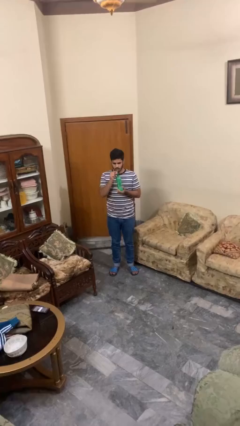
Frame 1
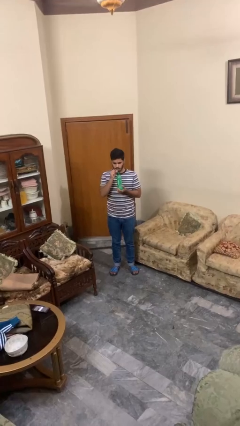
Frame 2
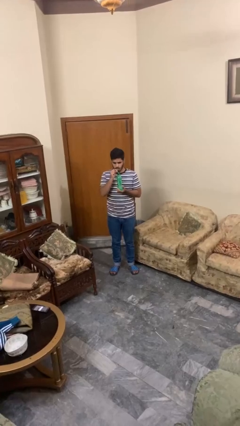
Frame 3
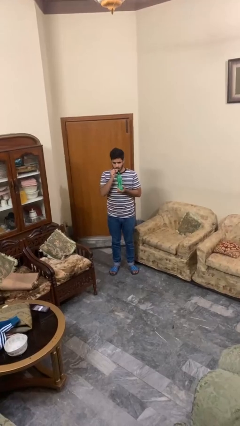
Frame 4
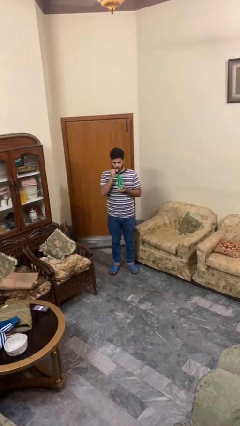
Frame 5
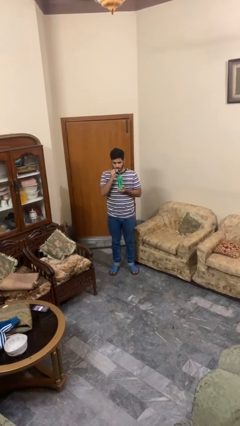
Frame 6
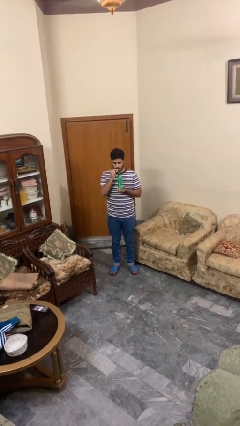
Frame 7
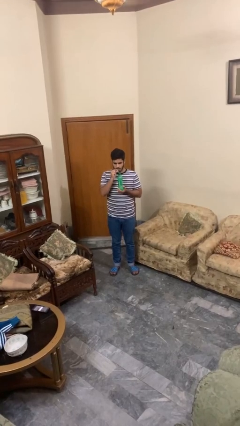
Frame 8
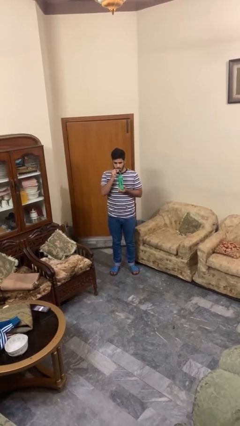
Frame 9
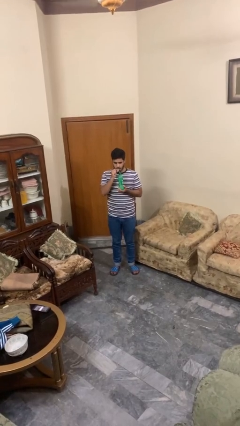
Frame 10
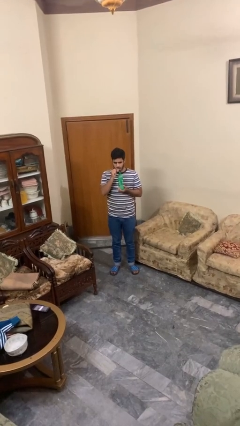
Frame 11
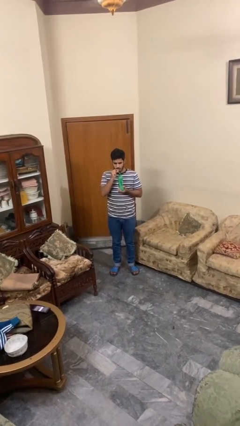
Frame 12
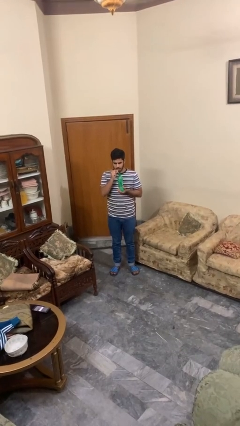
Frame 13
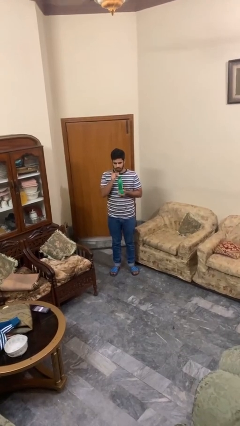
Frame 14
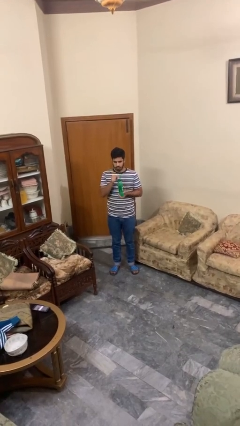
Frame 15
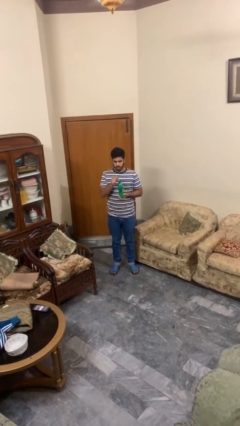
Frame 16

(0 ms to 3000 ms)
person drinks from straw

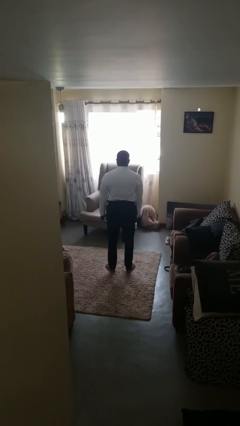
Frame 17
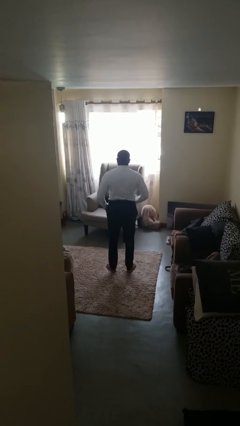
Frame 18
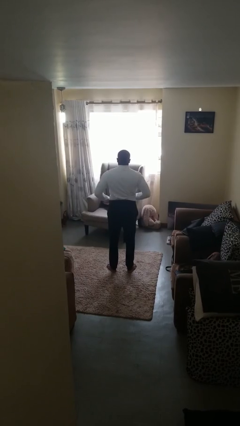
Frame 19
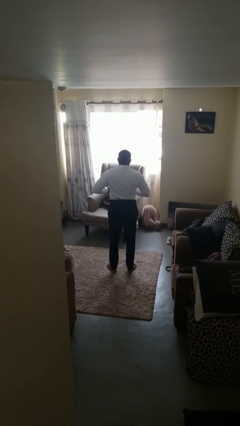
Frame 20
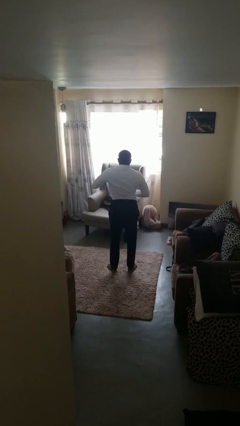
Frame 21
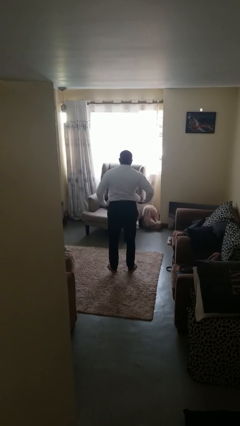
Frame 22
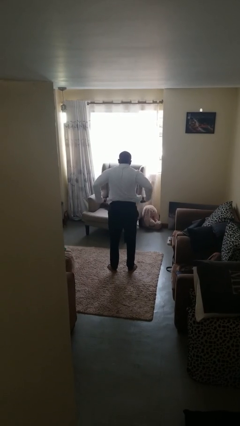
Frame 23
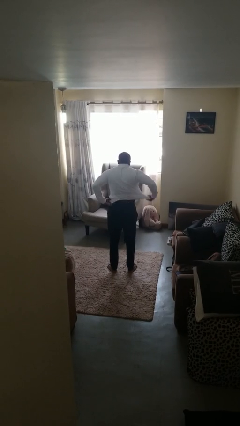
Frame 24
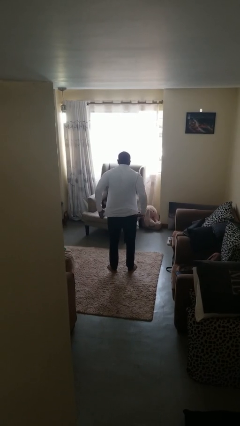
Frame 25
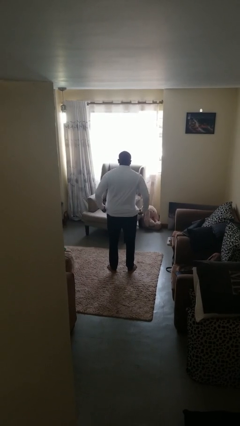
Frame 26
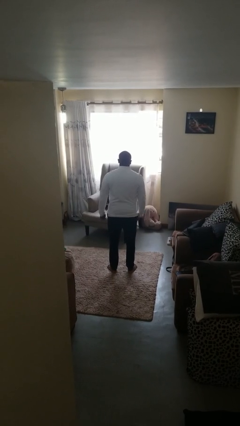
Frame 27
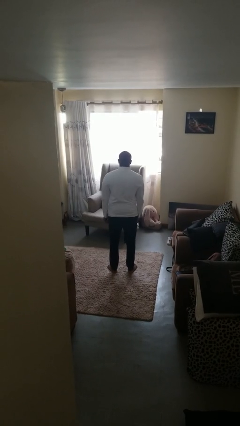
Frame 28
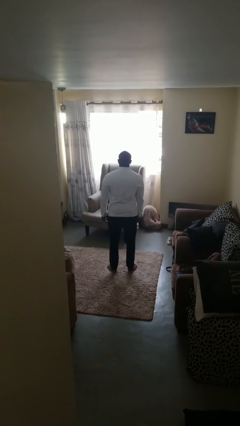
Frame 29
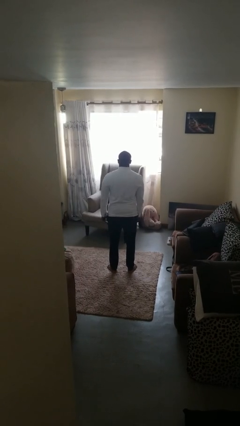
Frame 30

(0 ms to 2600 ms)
person untucks shirt

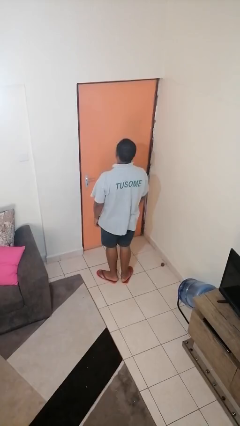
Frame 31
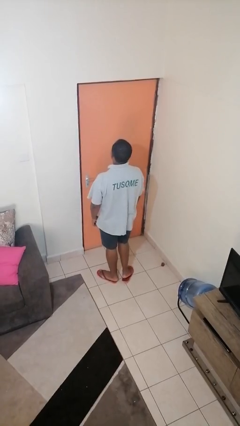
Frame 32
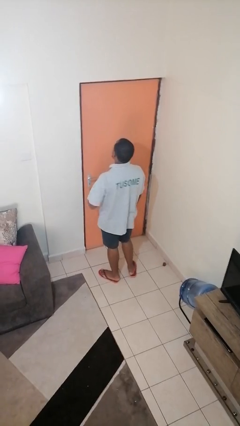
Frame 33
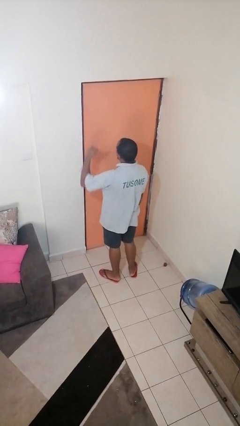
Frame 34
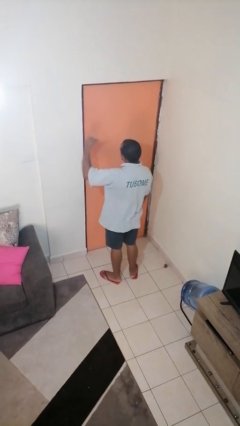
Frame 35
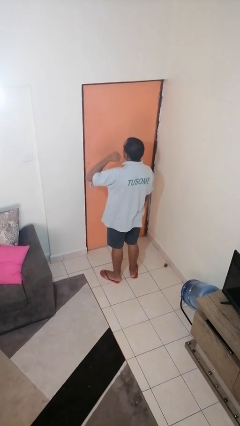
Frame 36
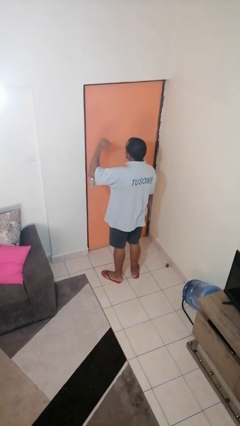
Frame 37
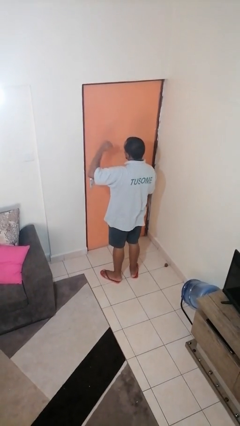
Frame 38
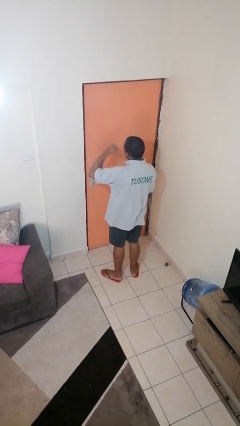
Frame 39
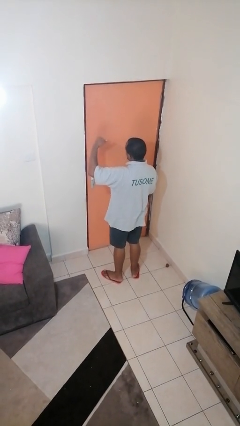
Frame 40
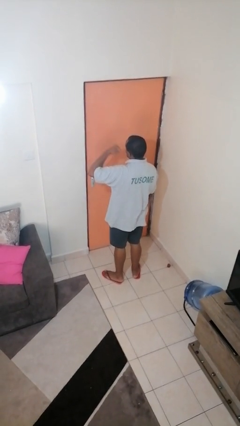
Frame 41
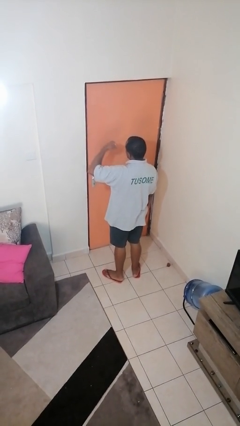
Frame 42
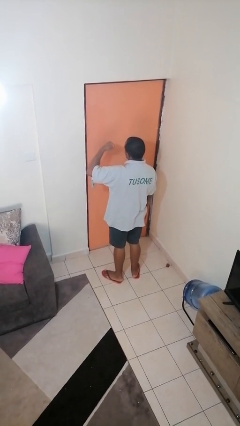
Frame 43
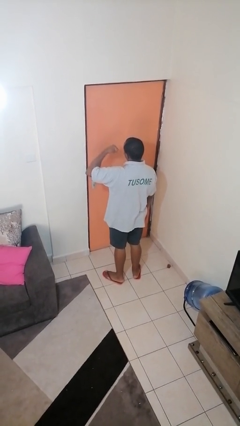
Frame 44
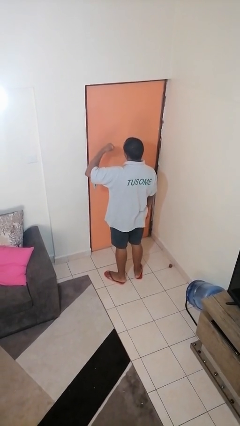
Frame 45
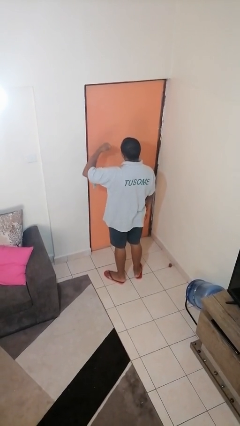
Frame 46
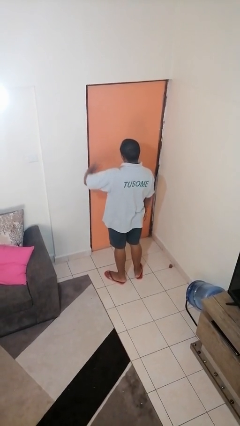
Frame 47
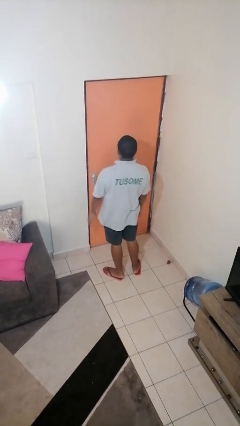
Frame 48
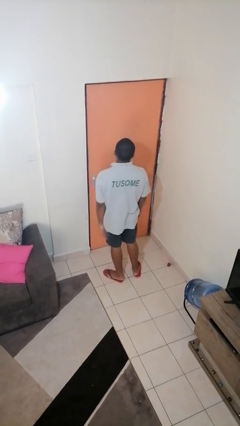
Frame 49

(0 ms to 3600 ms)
person gestures call me

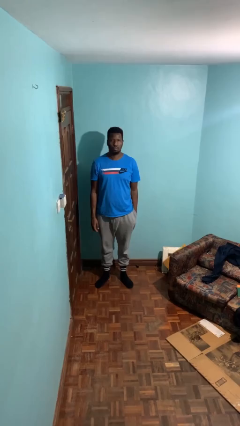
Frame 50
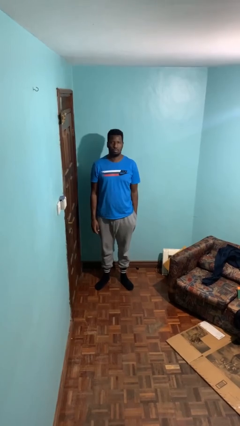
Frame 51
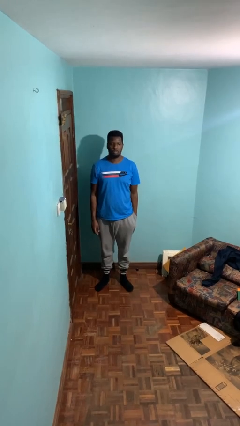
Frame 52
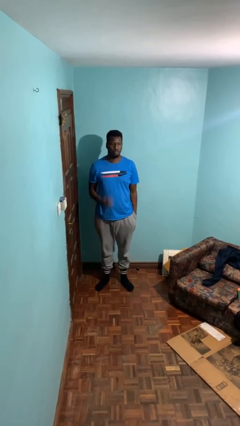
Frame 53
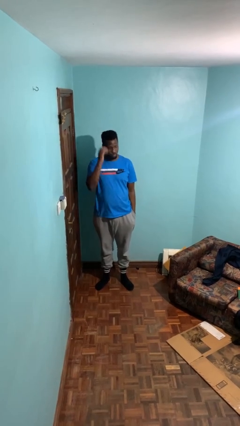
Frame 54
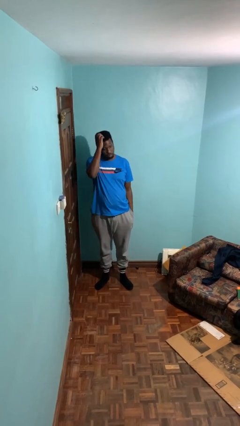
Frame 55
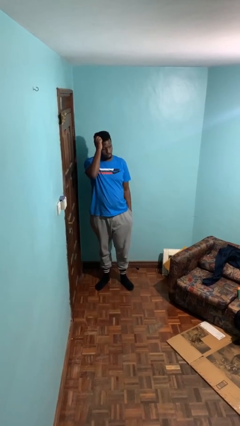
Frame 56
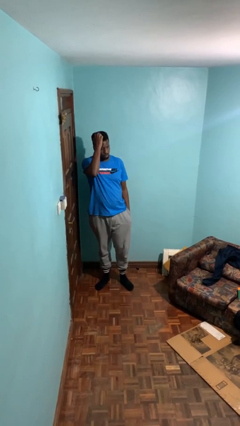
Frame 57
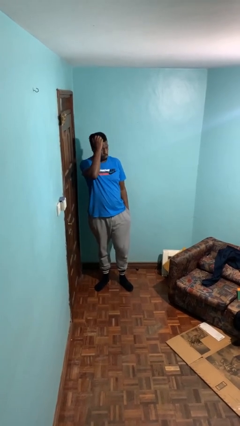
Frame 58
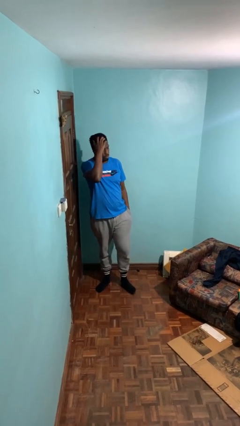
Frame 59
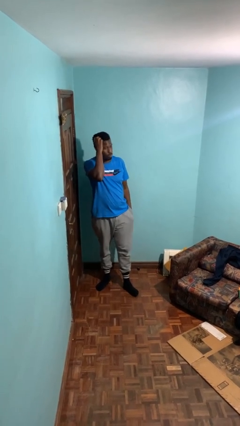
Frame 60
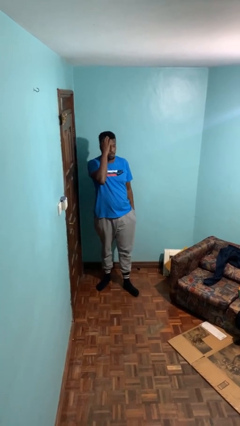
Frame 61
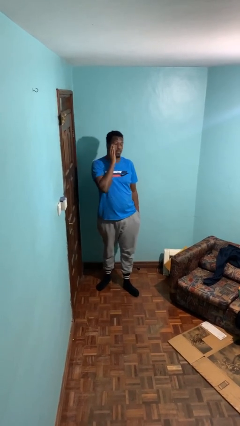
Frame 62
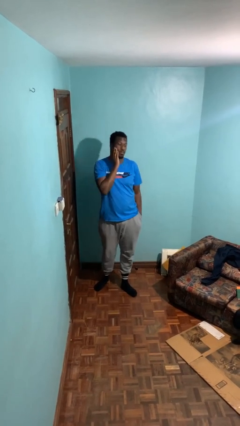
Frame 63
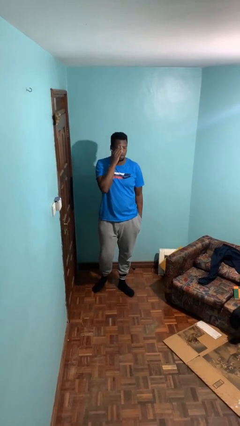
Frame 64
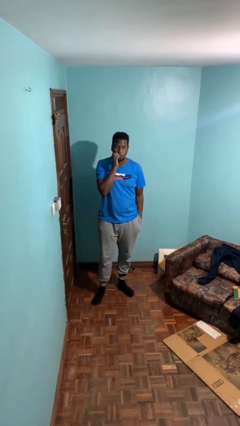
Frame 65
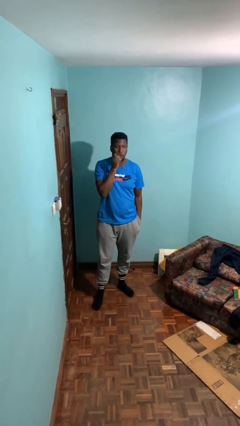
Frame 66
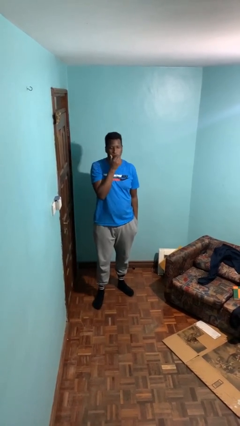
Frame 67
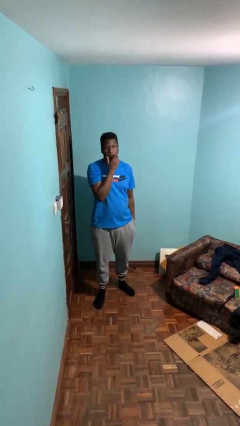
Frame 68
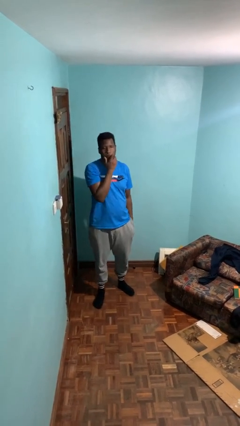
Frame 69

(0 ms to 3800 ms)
person scratches face

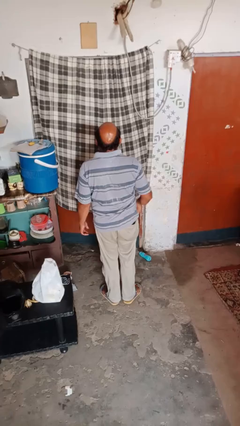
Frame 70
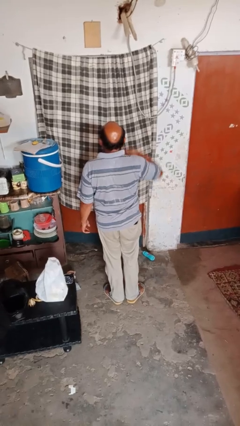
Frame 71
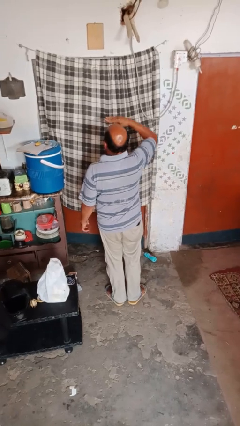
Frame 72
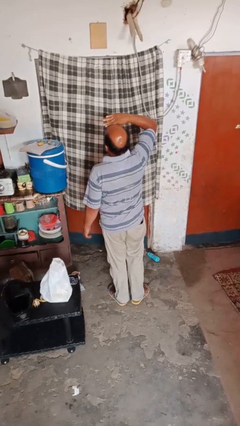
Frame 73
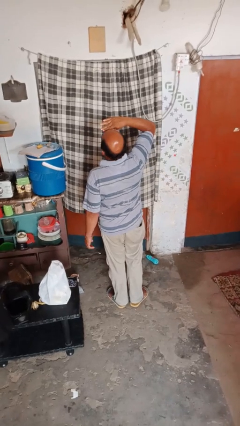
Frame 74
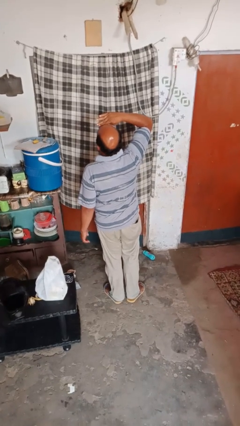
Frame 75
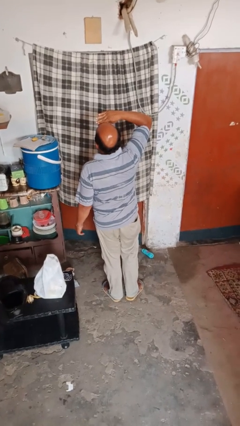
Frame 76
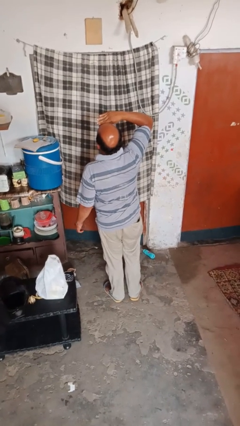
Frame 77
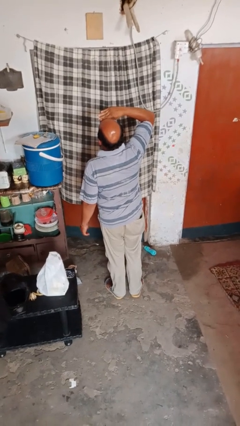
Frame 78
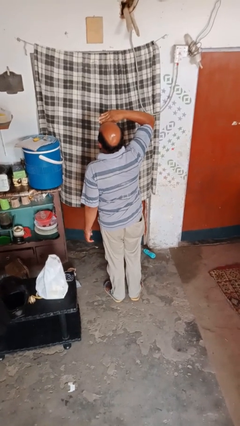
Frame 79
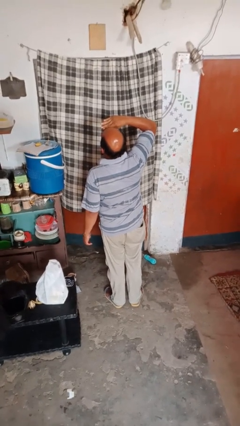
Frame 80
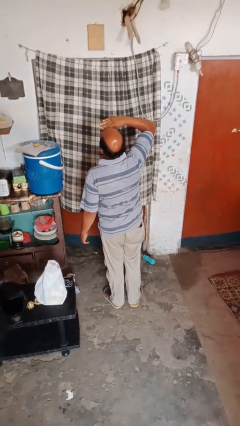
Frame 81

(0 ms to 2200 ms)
person salutes

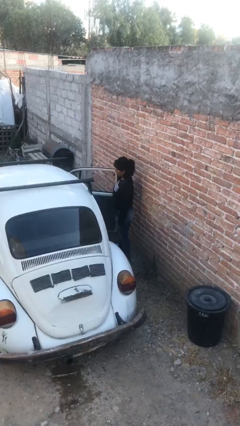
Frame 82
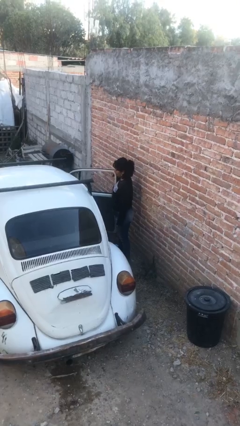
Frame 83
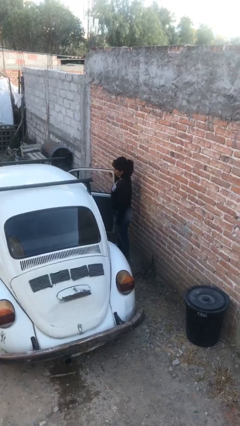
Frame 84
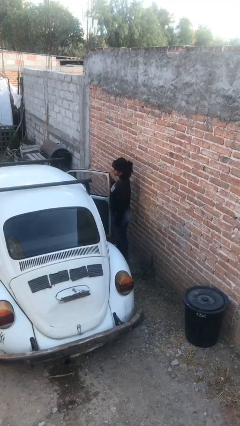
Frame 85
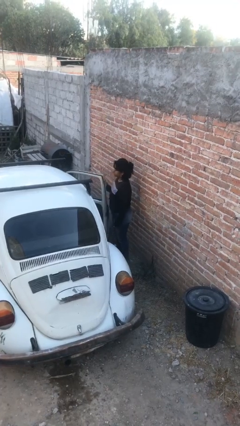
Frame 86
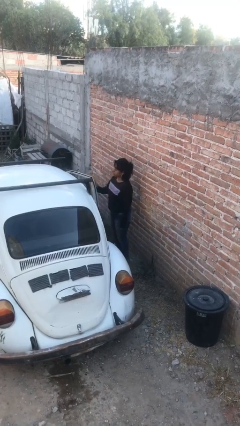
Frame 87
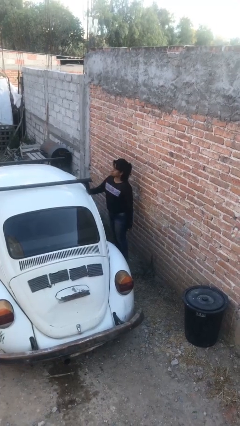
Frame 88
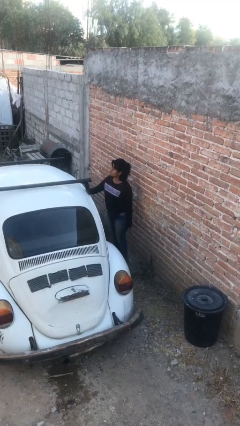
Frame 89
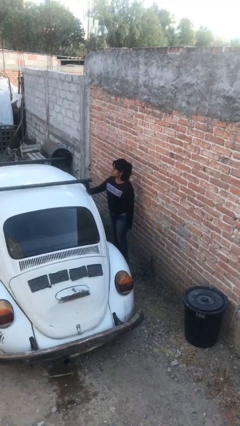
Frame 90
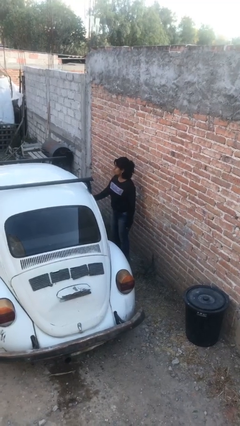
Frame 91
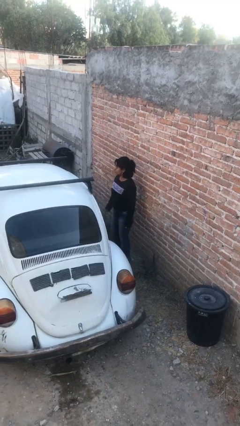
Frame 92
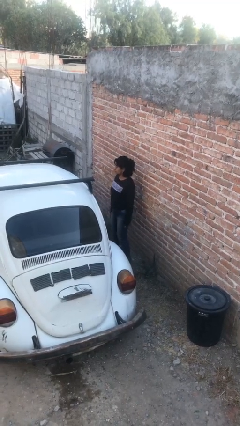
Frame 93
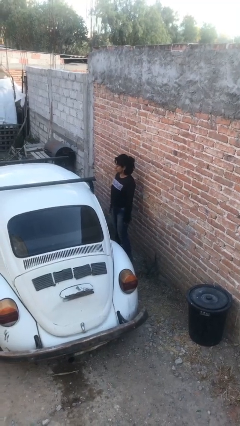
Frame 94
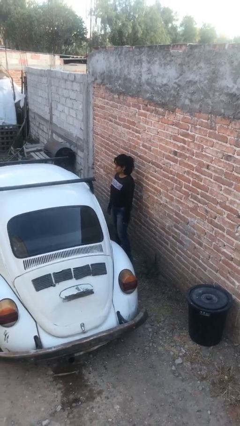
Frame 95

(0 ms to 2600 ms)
person closes car door

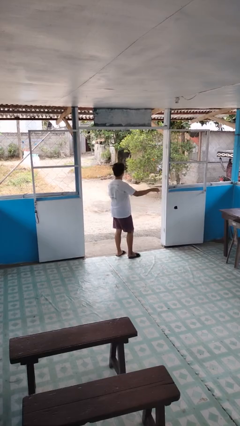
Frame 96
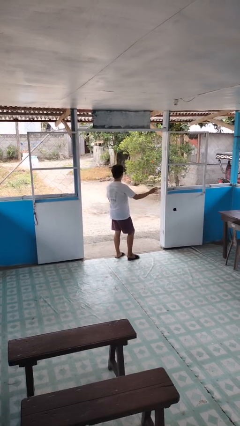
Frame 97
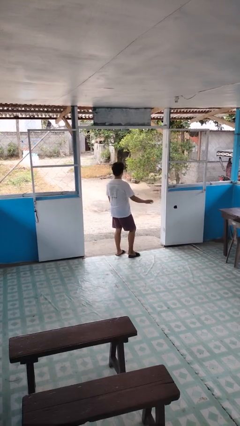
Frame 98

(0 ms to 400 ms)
person slaps hands on thighs
